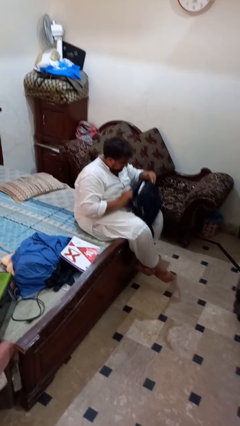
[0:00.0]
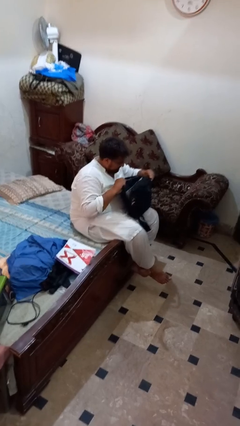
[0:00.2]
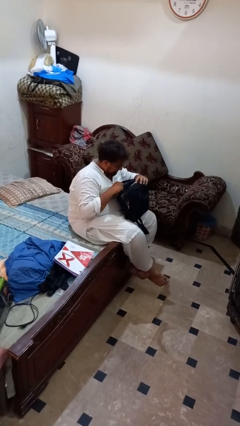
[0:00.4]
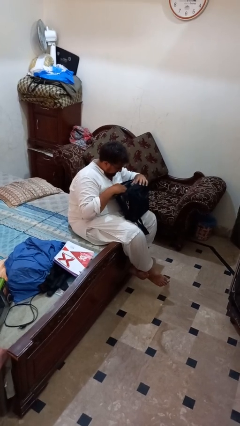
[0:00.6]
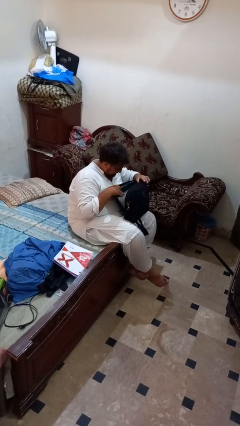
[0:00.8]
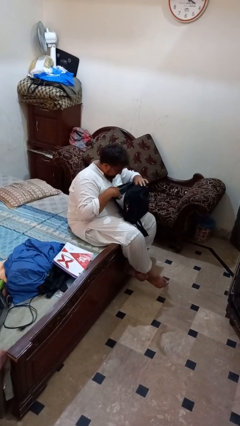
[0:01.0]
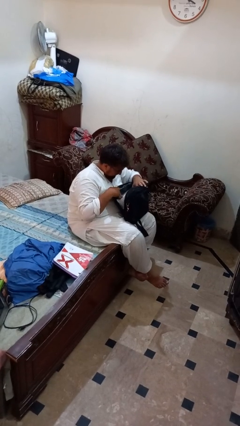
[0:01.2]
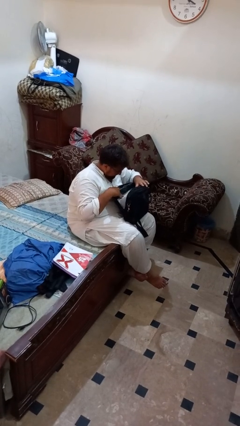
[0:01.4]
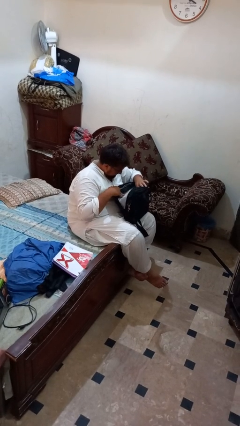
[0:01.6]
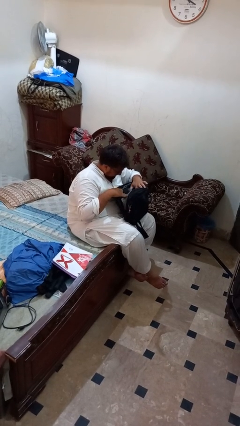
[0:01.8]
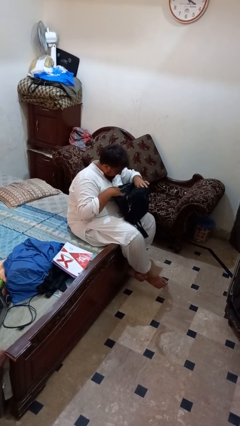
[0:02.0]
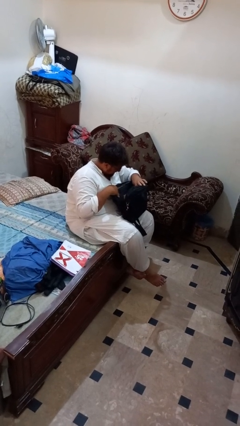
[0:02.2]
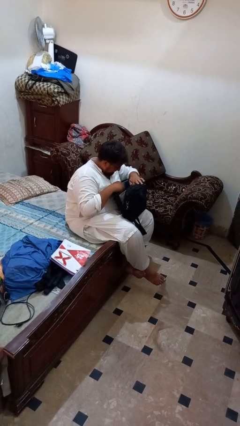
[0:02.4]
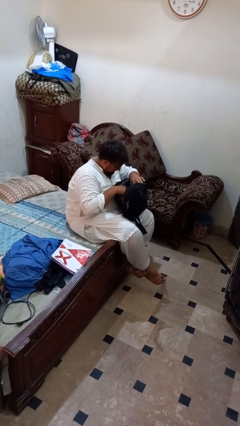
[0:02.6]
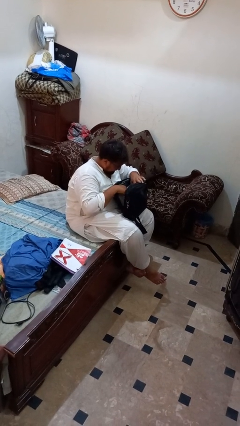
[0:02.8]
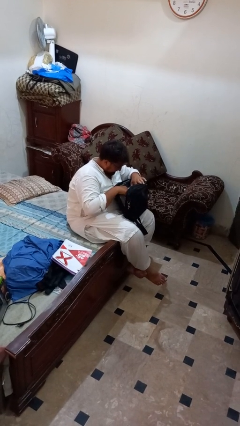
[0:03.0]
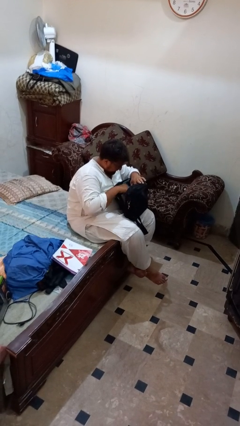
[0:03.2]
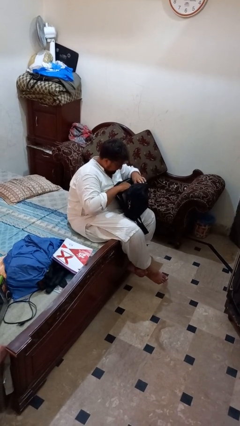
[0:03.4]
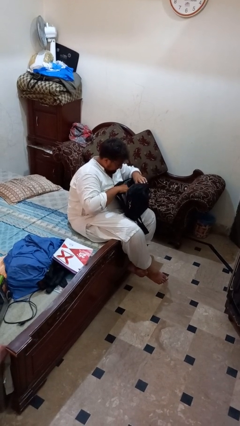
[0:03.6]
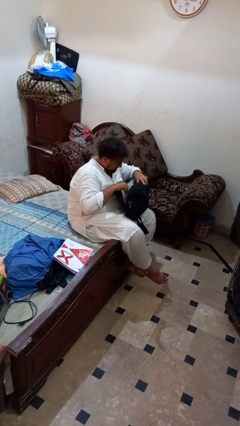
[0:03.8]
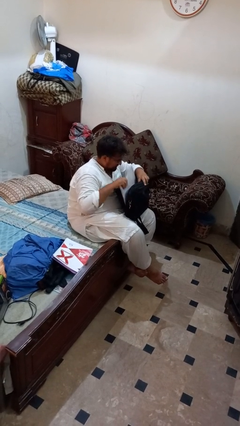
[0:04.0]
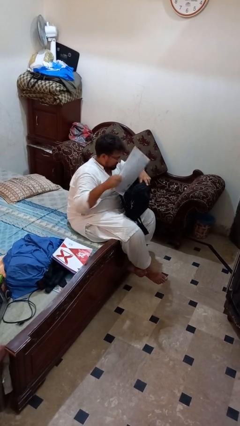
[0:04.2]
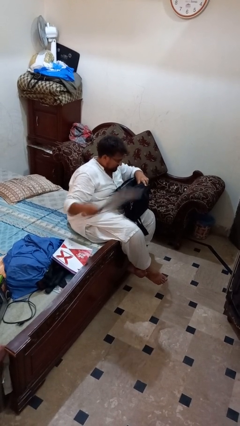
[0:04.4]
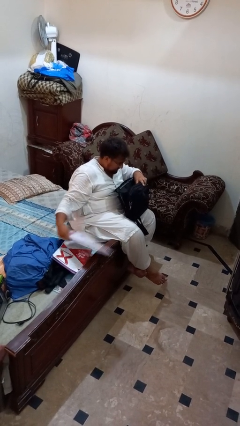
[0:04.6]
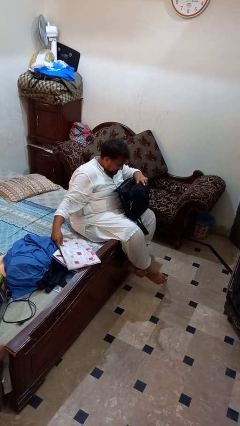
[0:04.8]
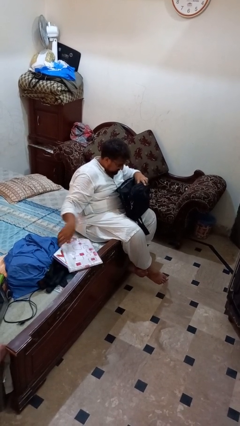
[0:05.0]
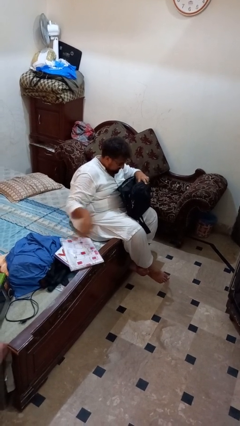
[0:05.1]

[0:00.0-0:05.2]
person searches in bag

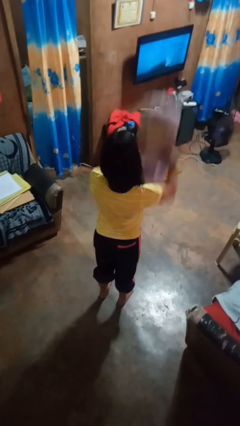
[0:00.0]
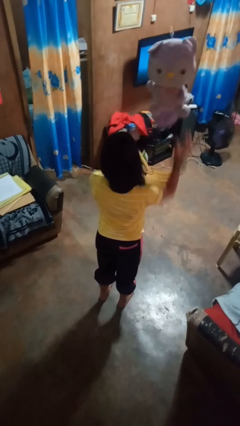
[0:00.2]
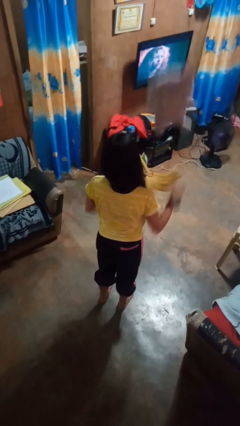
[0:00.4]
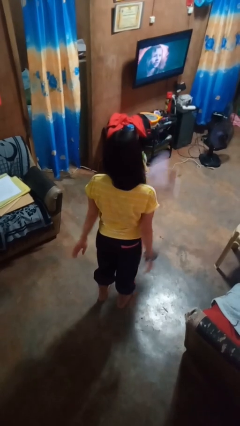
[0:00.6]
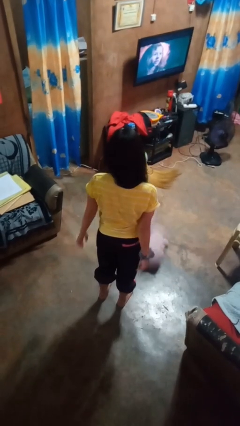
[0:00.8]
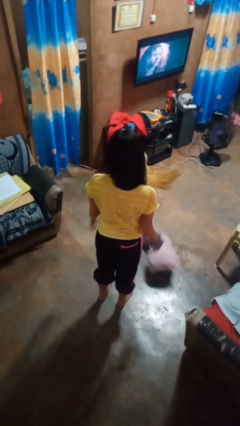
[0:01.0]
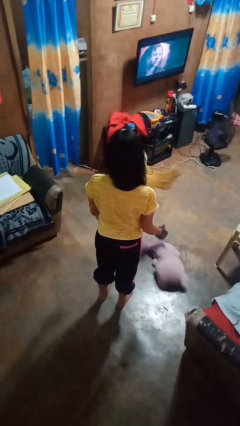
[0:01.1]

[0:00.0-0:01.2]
person throws object into air

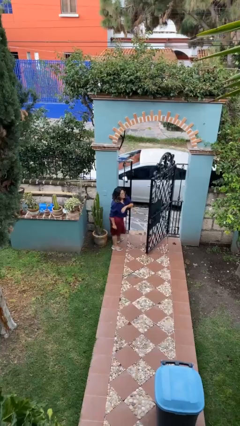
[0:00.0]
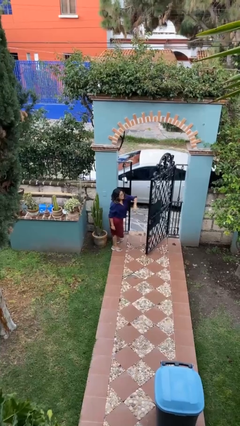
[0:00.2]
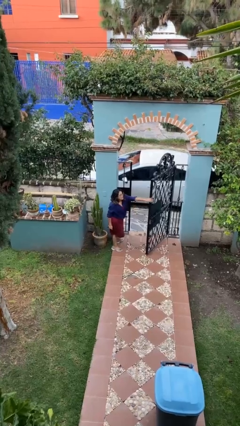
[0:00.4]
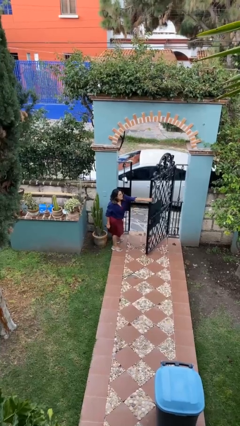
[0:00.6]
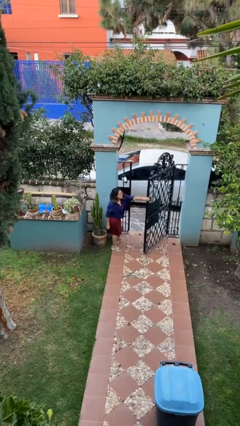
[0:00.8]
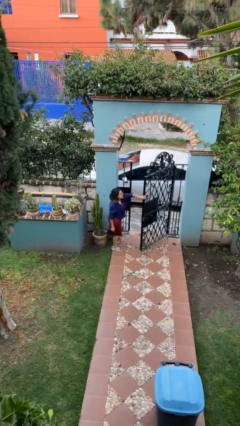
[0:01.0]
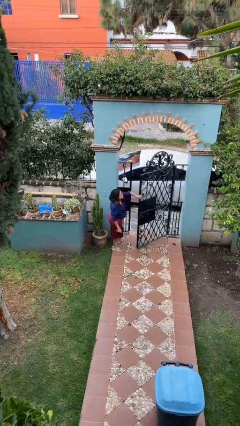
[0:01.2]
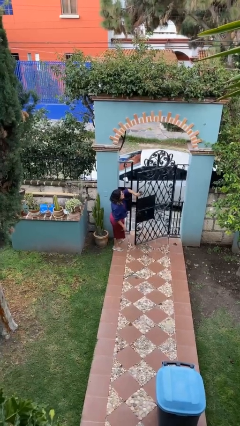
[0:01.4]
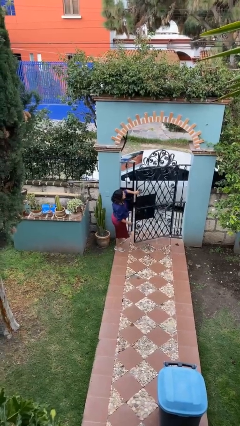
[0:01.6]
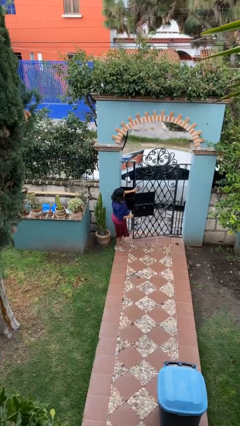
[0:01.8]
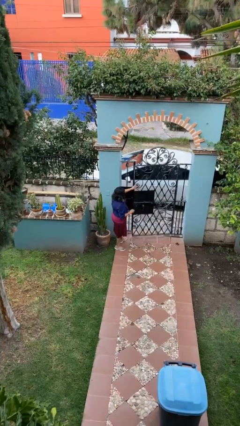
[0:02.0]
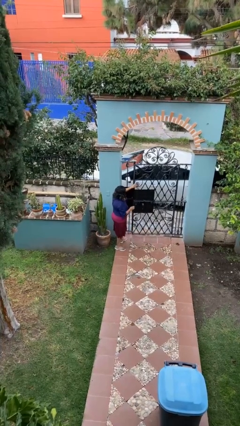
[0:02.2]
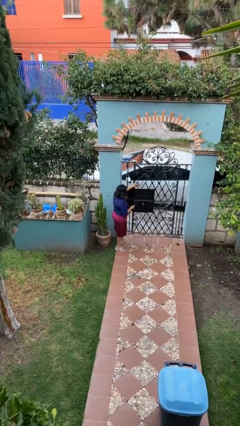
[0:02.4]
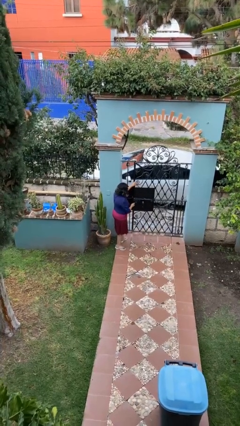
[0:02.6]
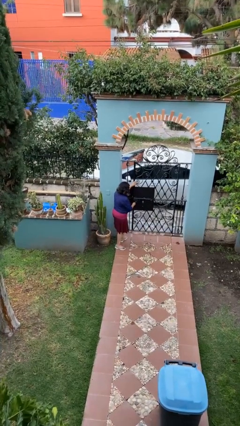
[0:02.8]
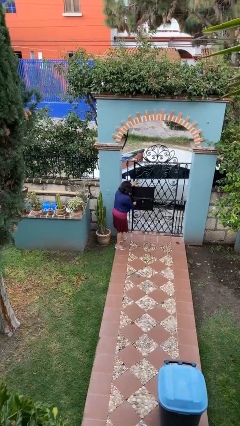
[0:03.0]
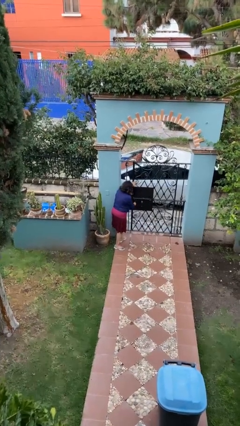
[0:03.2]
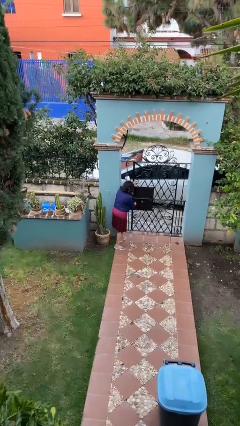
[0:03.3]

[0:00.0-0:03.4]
person closes facility door

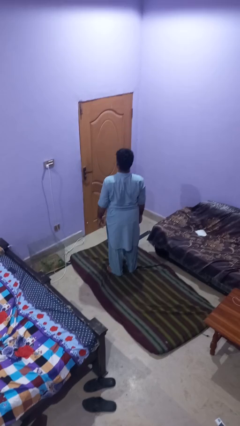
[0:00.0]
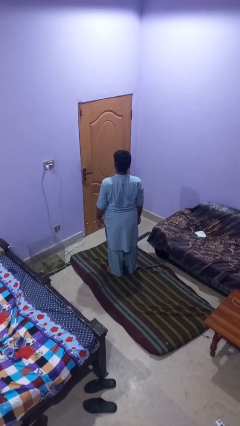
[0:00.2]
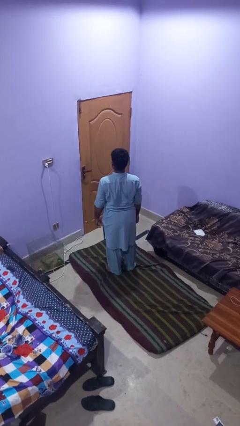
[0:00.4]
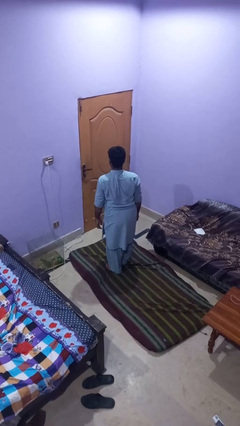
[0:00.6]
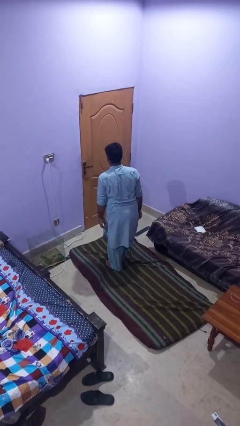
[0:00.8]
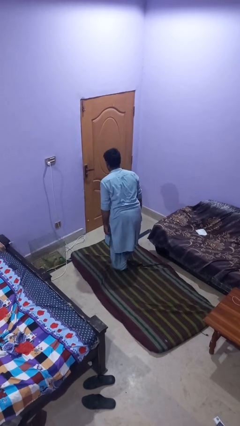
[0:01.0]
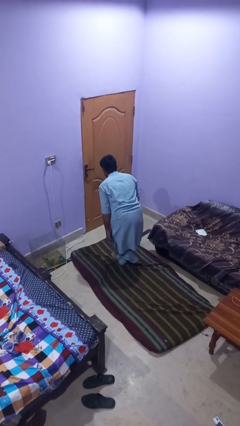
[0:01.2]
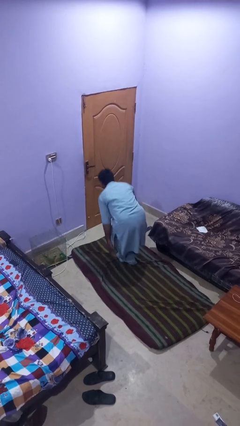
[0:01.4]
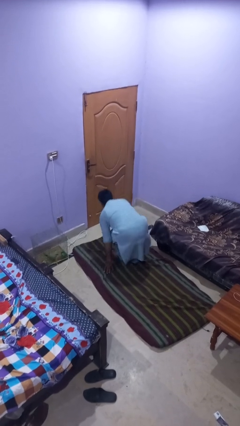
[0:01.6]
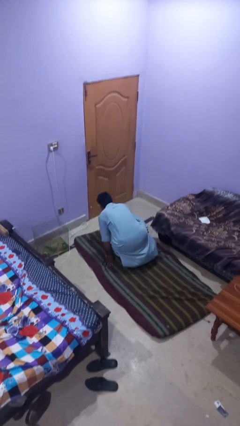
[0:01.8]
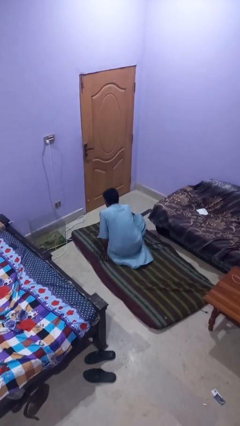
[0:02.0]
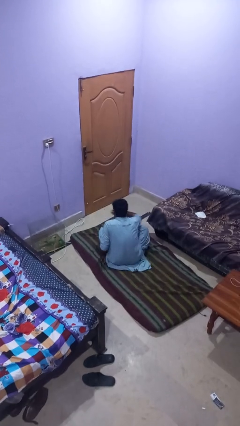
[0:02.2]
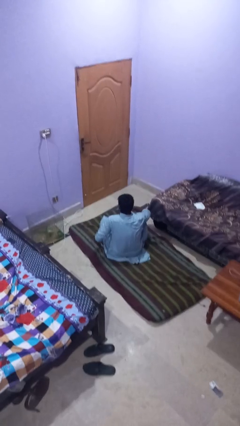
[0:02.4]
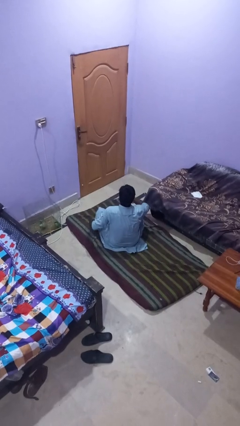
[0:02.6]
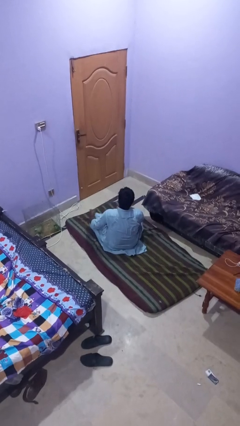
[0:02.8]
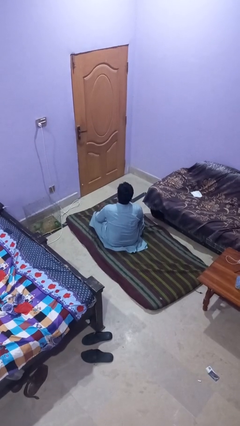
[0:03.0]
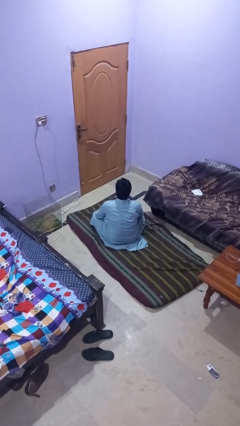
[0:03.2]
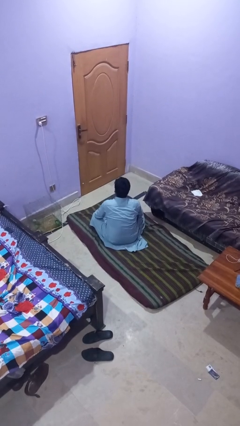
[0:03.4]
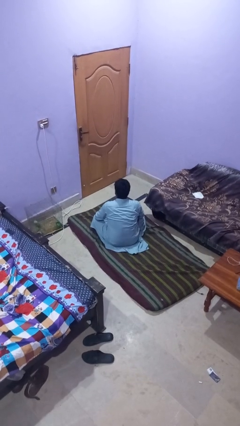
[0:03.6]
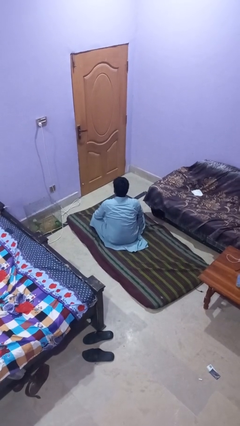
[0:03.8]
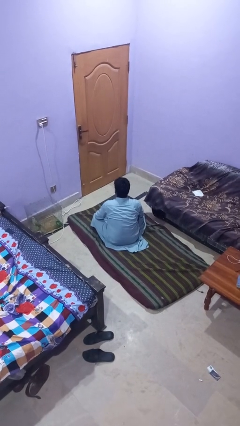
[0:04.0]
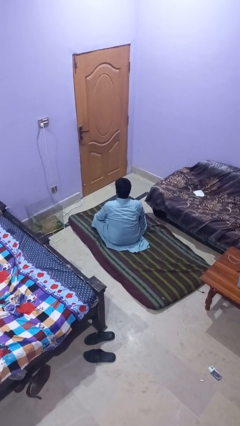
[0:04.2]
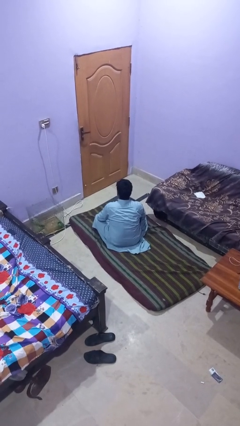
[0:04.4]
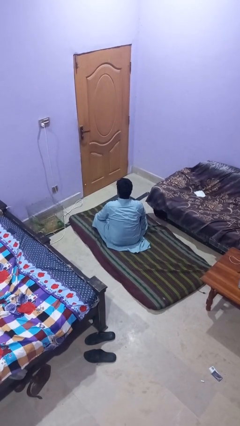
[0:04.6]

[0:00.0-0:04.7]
person sits crisscross

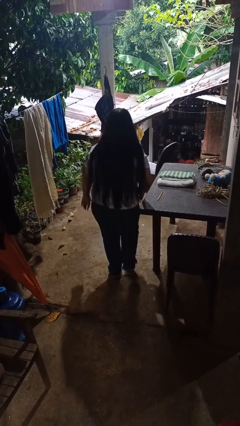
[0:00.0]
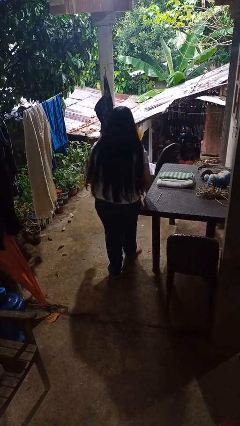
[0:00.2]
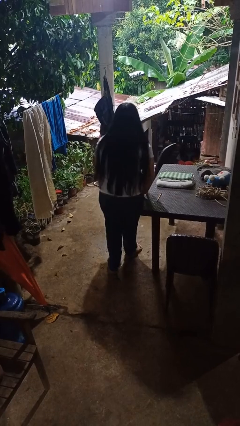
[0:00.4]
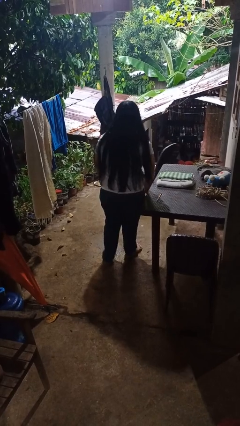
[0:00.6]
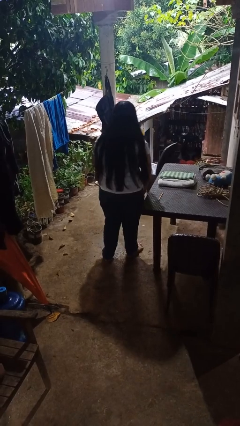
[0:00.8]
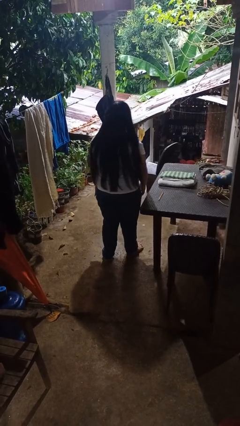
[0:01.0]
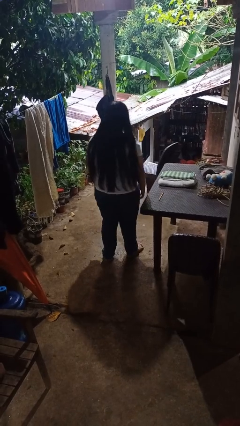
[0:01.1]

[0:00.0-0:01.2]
person bumps into table

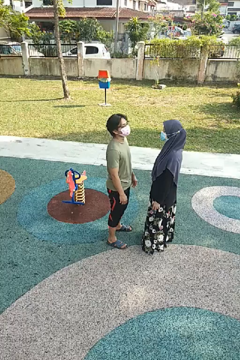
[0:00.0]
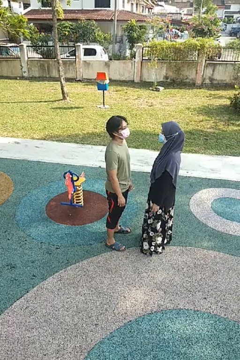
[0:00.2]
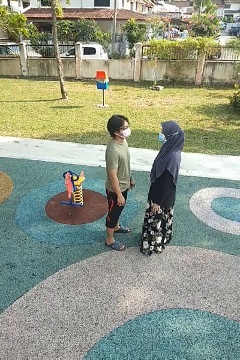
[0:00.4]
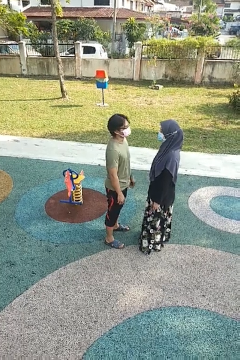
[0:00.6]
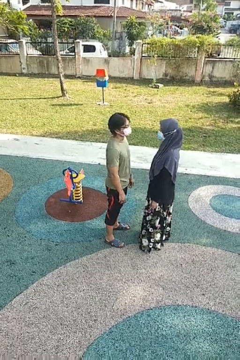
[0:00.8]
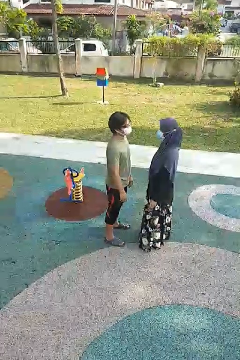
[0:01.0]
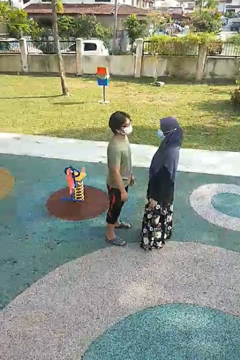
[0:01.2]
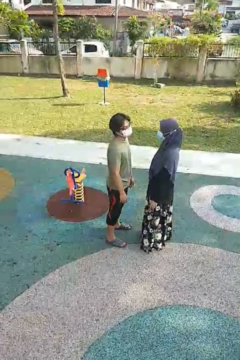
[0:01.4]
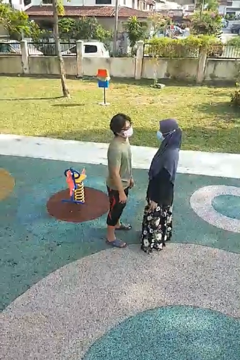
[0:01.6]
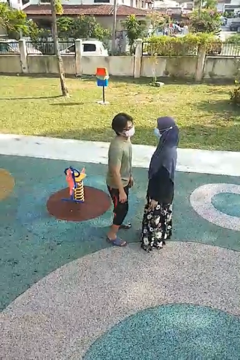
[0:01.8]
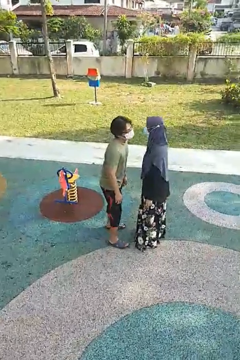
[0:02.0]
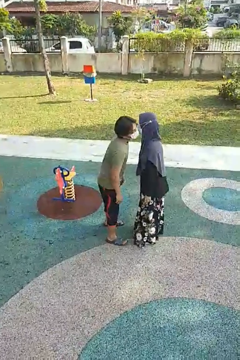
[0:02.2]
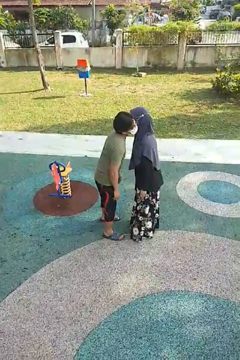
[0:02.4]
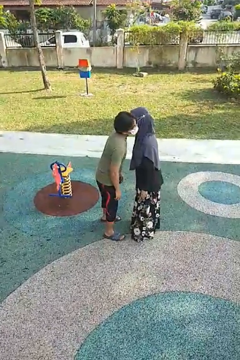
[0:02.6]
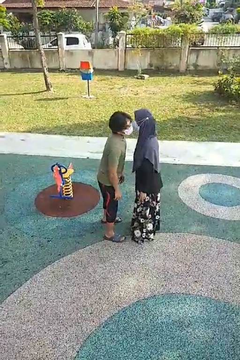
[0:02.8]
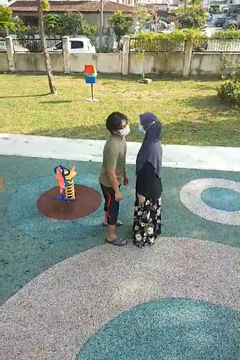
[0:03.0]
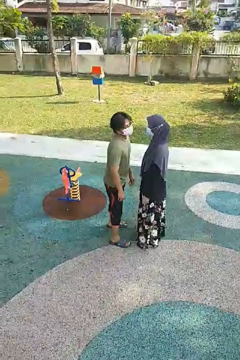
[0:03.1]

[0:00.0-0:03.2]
person kisses cheek of person
